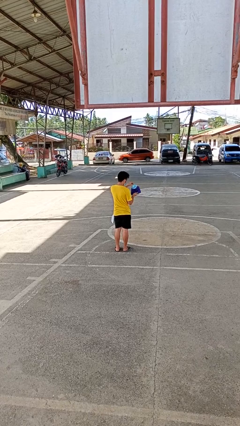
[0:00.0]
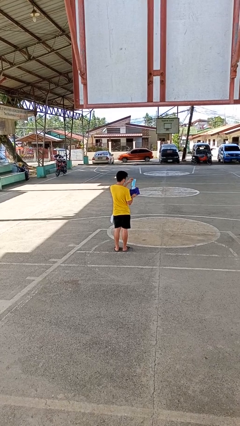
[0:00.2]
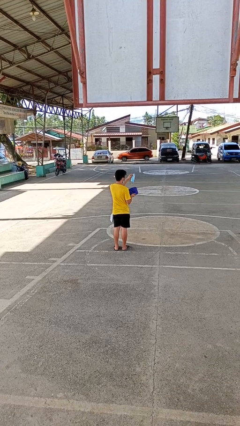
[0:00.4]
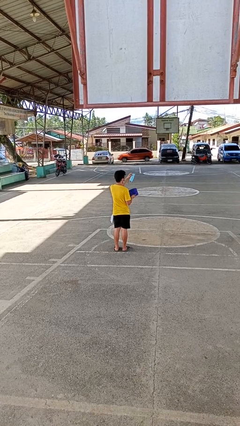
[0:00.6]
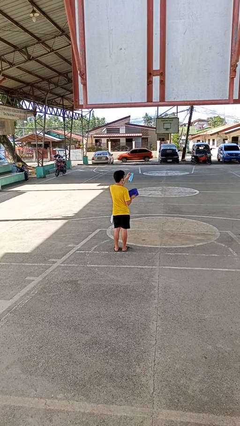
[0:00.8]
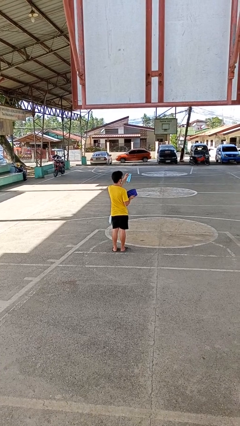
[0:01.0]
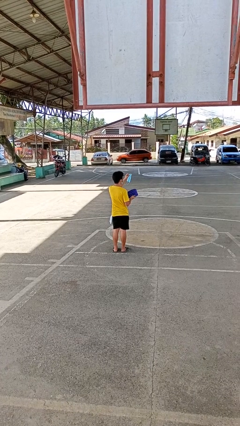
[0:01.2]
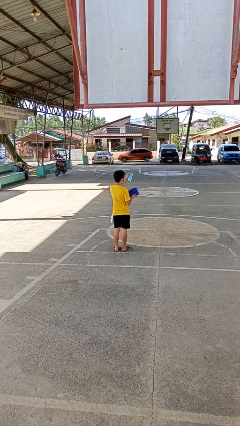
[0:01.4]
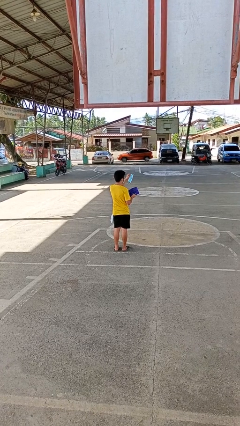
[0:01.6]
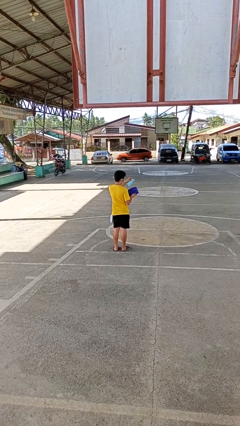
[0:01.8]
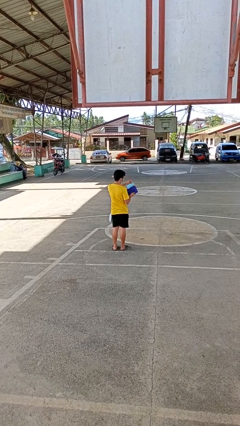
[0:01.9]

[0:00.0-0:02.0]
person takes object from purse

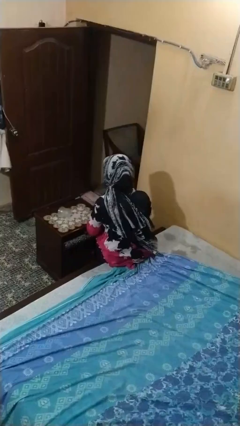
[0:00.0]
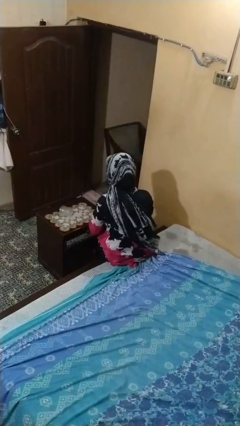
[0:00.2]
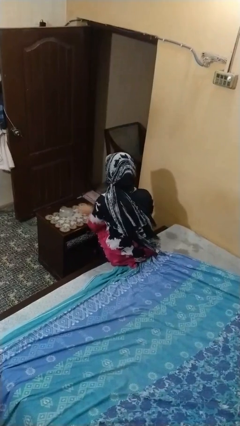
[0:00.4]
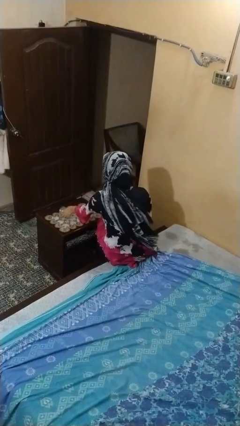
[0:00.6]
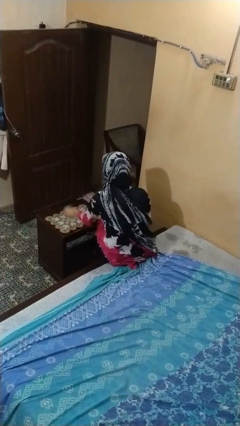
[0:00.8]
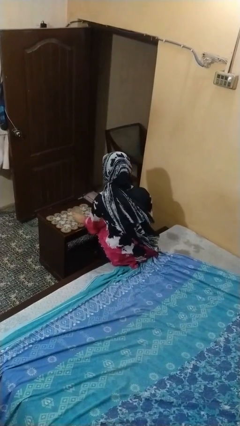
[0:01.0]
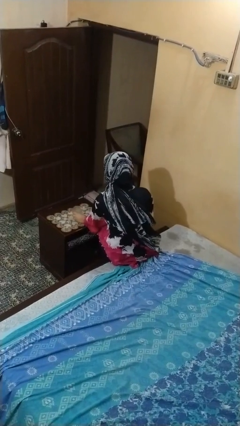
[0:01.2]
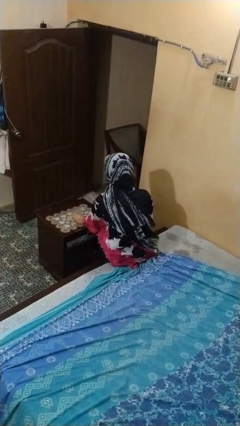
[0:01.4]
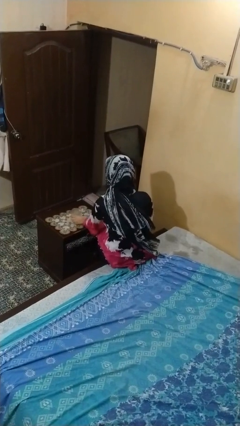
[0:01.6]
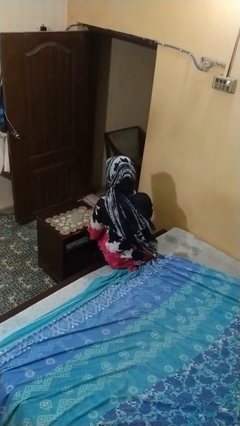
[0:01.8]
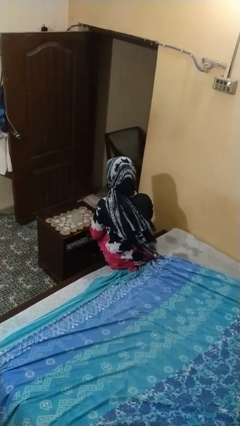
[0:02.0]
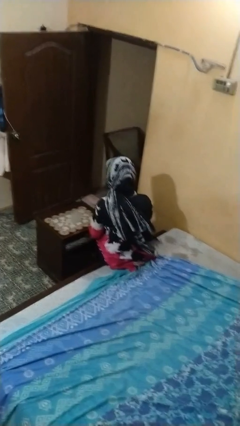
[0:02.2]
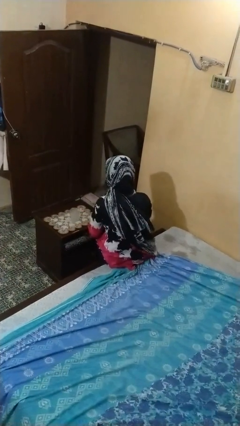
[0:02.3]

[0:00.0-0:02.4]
person sets upright glass

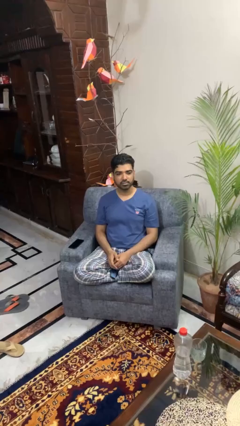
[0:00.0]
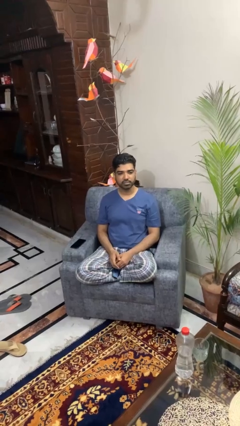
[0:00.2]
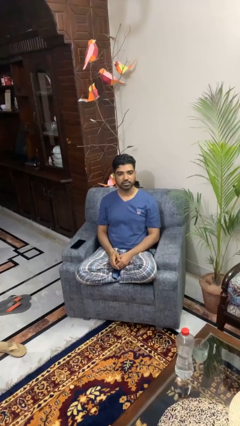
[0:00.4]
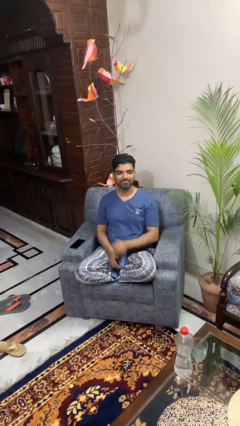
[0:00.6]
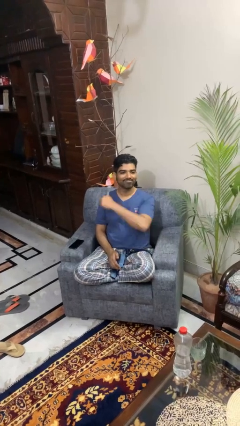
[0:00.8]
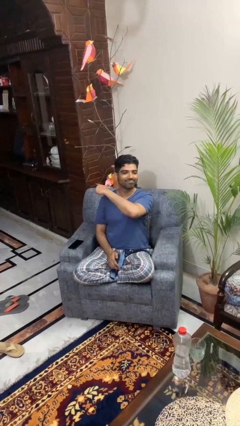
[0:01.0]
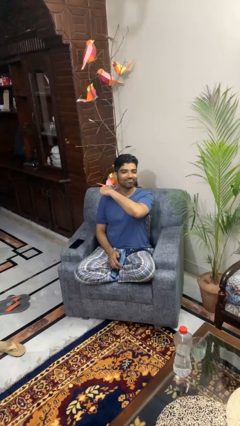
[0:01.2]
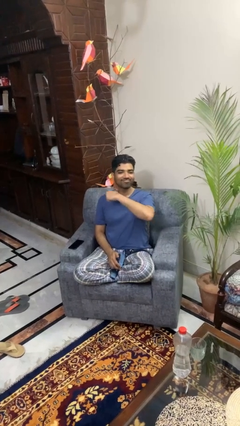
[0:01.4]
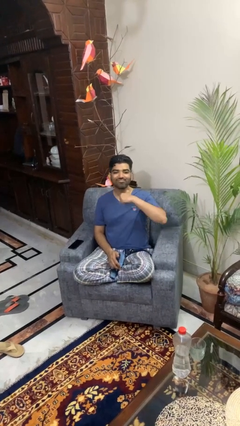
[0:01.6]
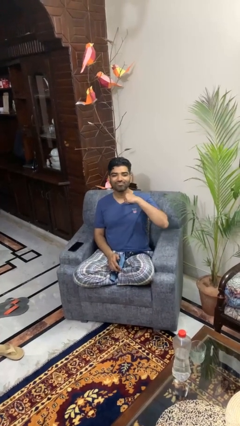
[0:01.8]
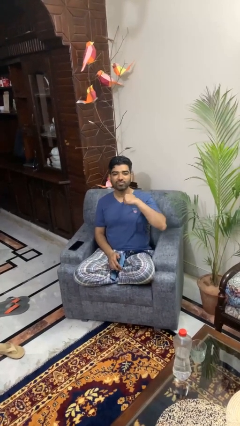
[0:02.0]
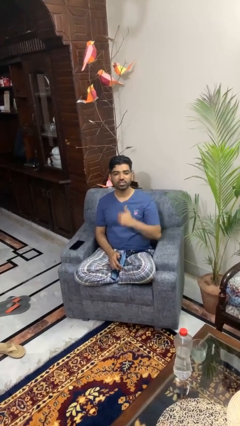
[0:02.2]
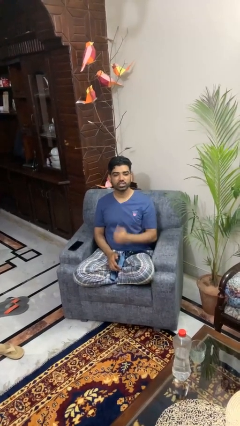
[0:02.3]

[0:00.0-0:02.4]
person gestures cut

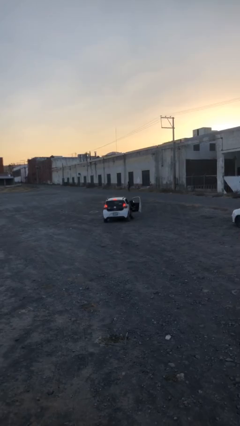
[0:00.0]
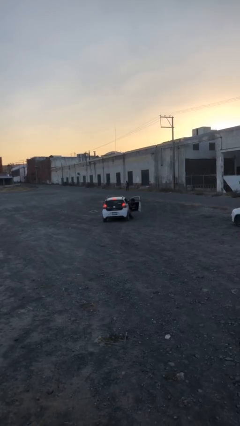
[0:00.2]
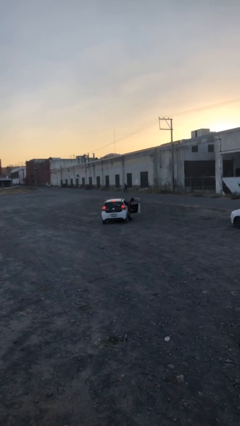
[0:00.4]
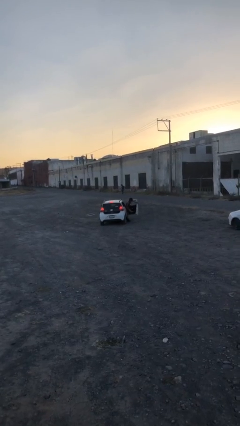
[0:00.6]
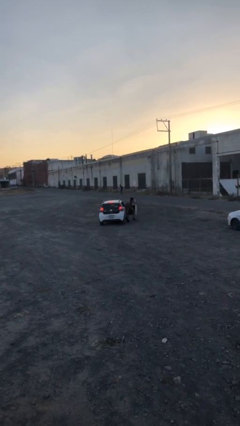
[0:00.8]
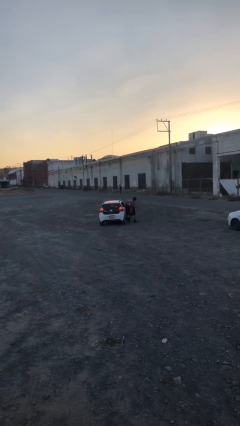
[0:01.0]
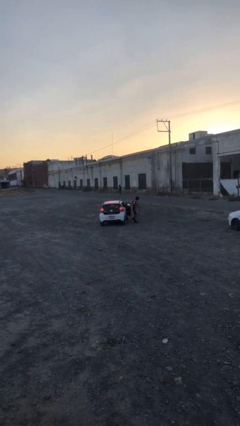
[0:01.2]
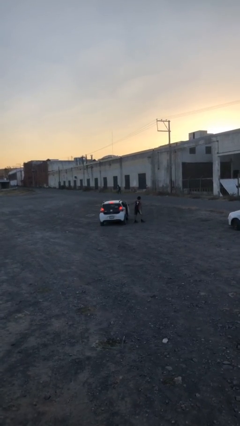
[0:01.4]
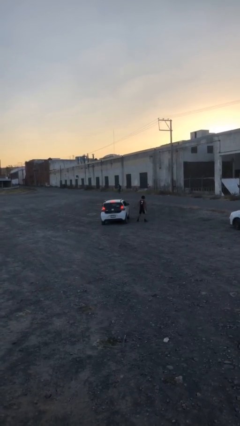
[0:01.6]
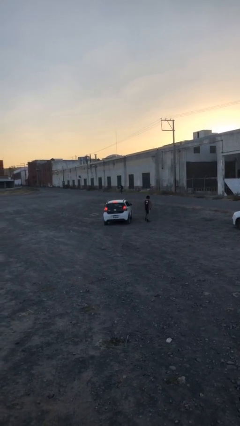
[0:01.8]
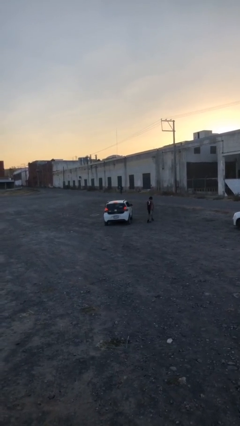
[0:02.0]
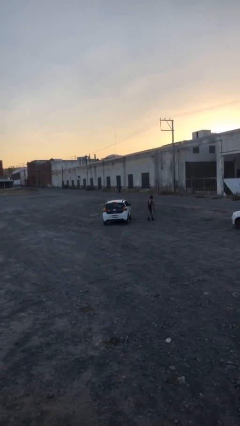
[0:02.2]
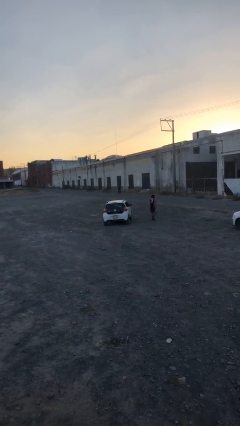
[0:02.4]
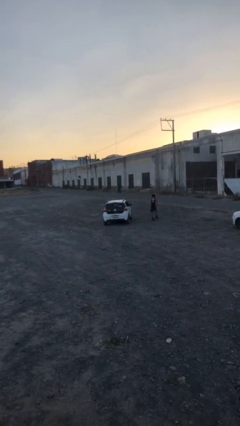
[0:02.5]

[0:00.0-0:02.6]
car drops off person

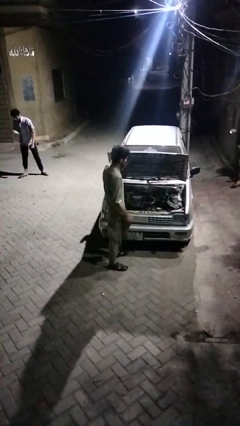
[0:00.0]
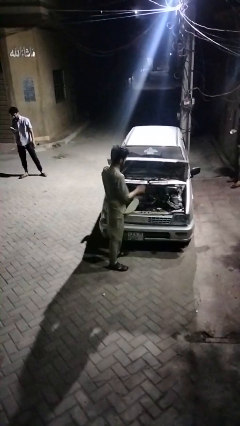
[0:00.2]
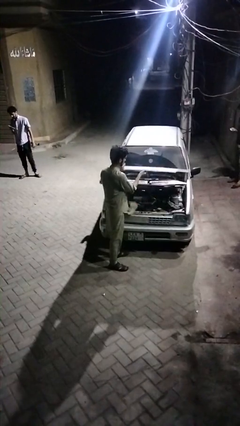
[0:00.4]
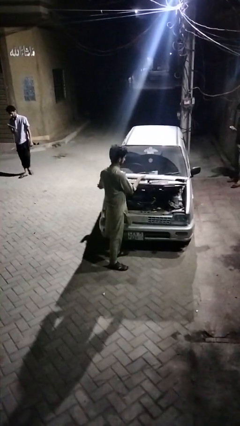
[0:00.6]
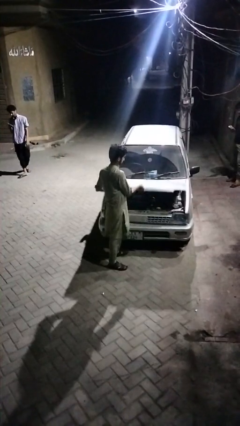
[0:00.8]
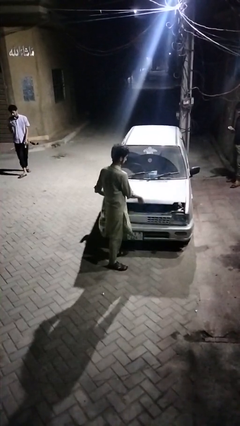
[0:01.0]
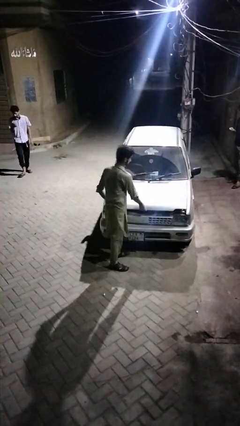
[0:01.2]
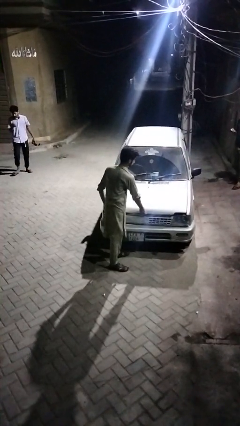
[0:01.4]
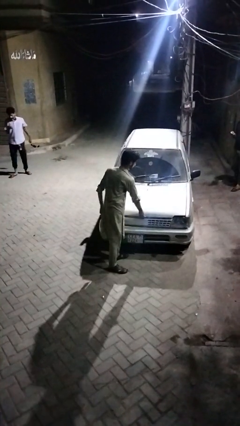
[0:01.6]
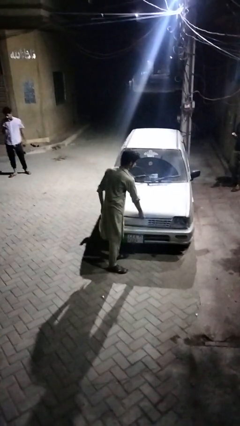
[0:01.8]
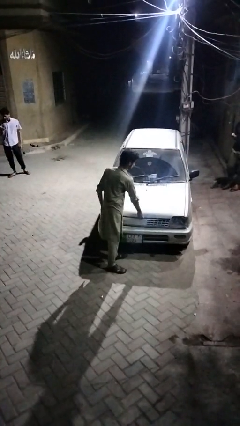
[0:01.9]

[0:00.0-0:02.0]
person closes car hood

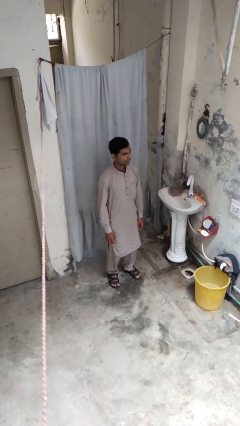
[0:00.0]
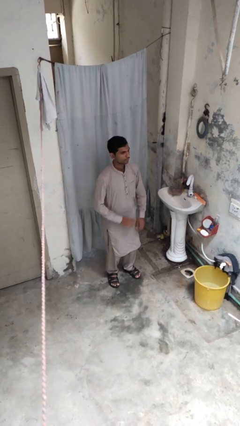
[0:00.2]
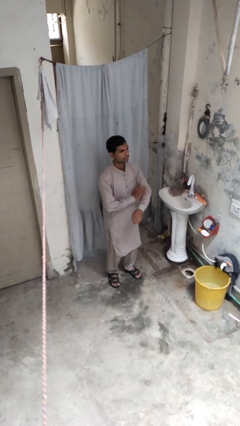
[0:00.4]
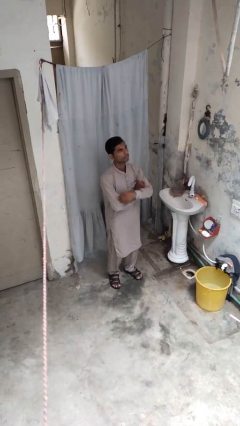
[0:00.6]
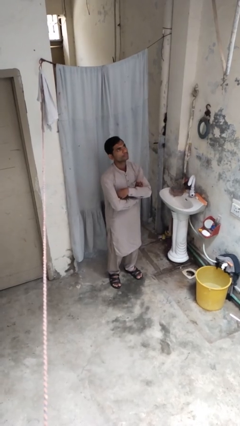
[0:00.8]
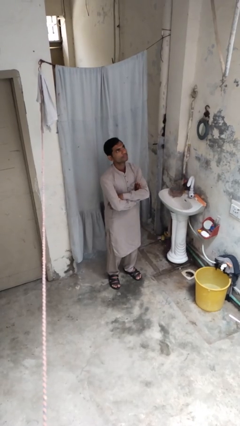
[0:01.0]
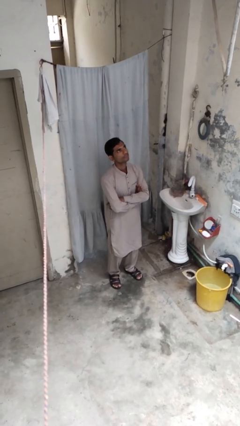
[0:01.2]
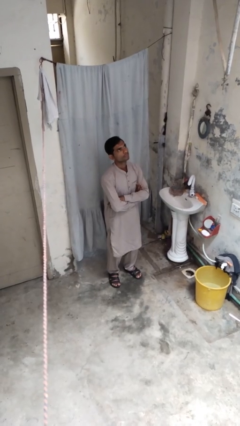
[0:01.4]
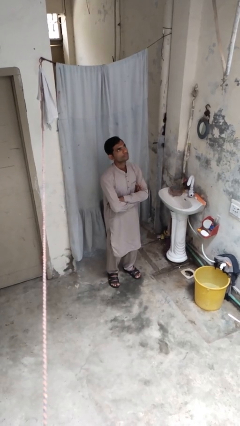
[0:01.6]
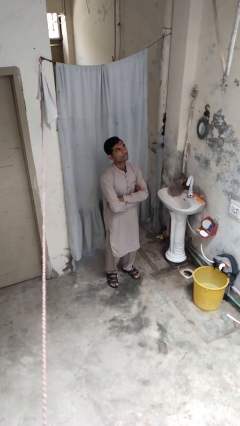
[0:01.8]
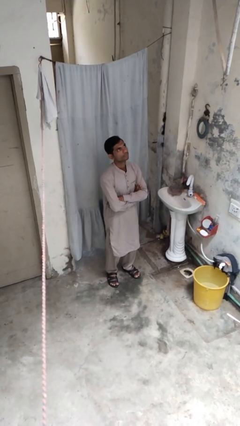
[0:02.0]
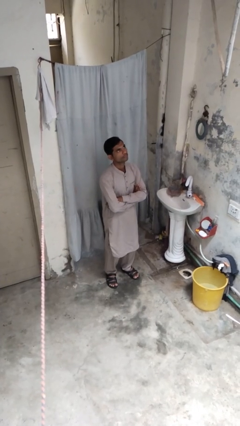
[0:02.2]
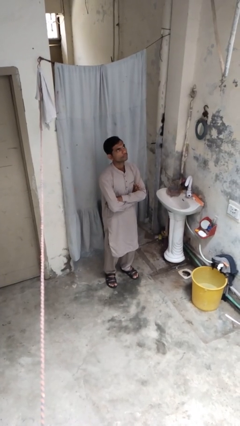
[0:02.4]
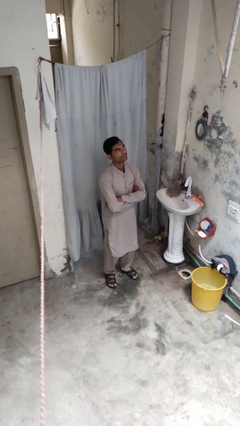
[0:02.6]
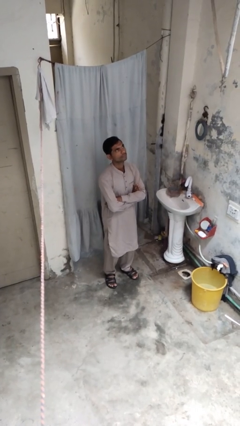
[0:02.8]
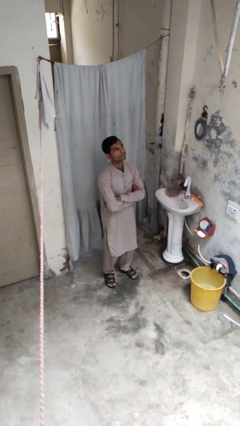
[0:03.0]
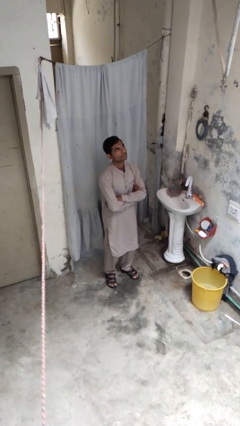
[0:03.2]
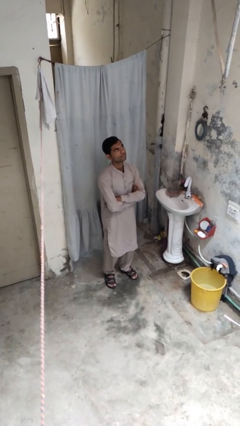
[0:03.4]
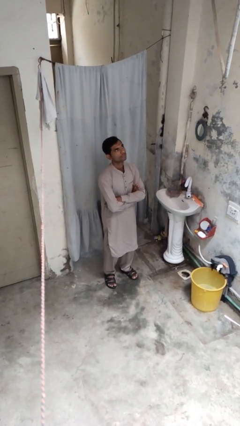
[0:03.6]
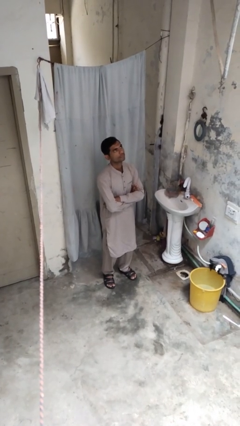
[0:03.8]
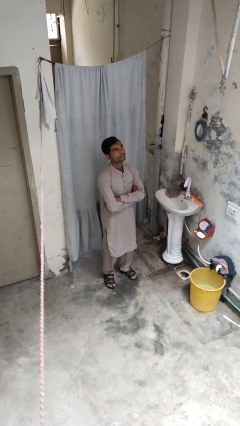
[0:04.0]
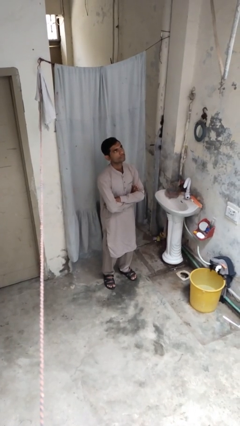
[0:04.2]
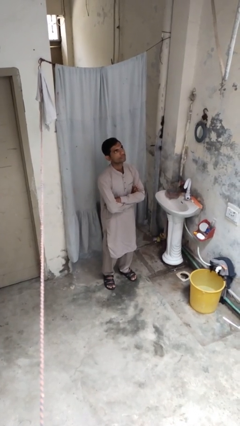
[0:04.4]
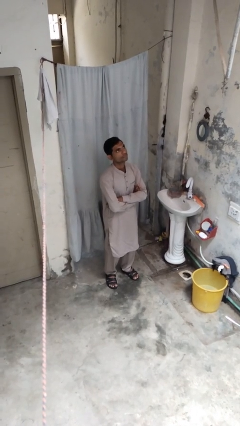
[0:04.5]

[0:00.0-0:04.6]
person crosses arms

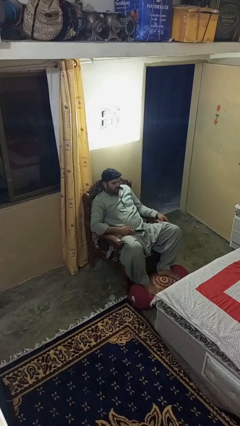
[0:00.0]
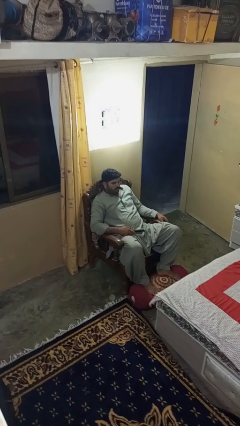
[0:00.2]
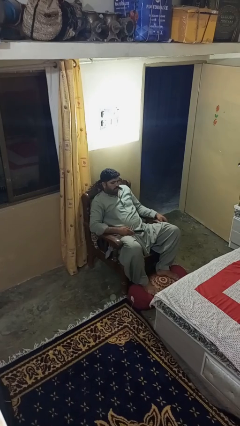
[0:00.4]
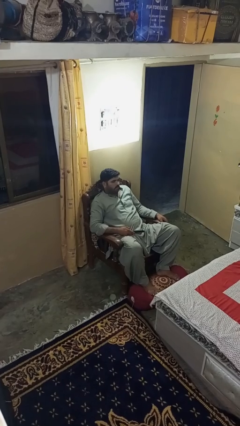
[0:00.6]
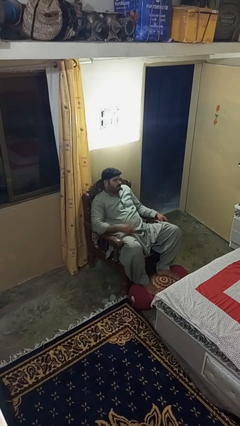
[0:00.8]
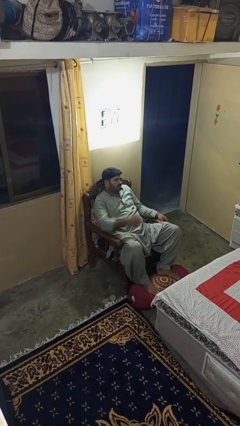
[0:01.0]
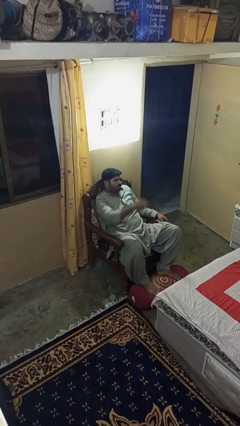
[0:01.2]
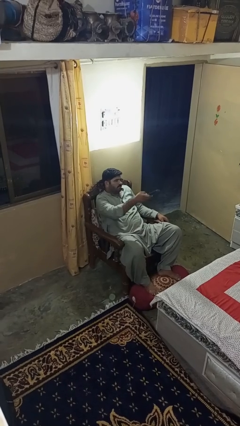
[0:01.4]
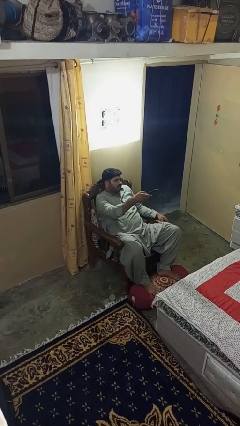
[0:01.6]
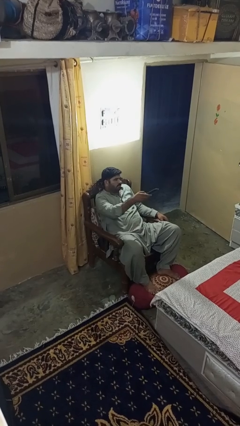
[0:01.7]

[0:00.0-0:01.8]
person uses television remote
